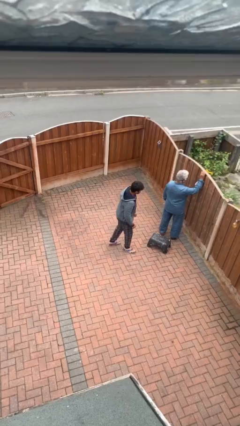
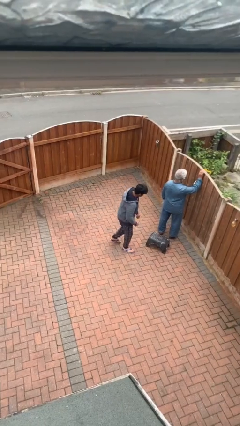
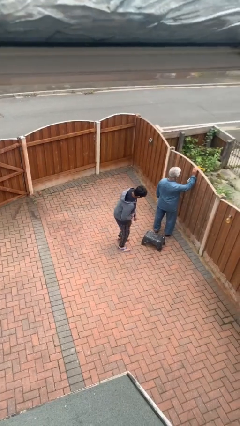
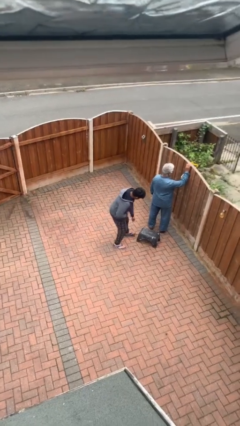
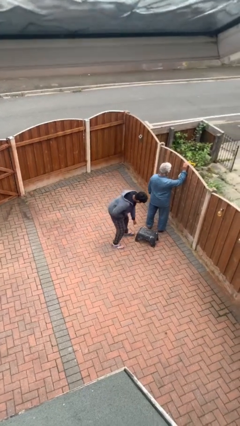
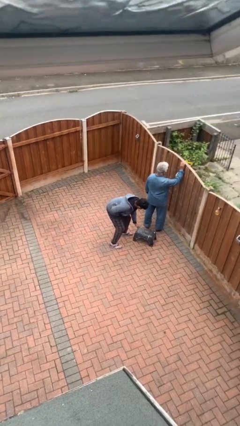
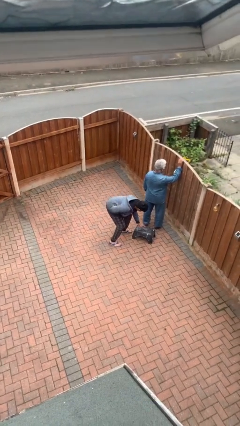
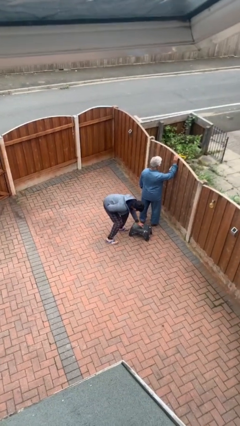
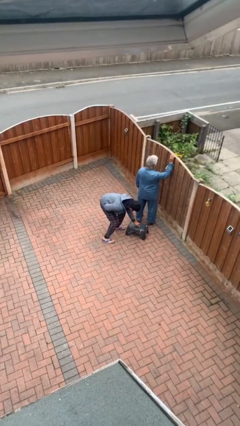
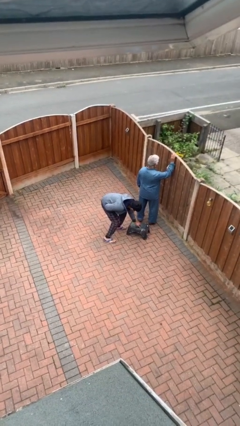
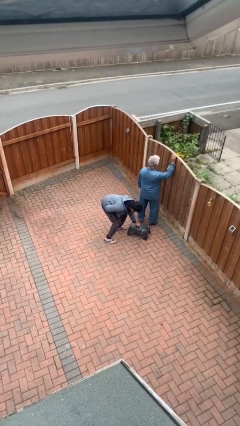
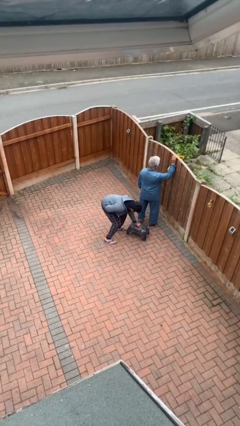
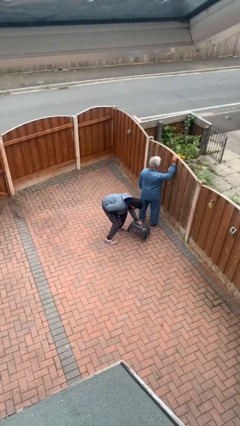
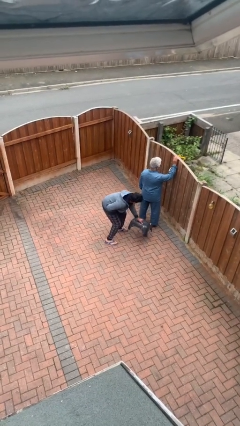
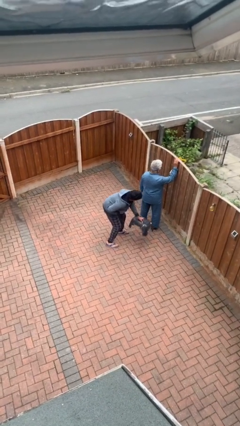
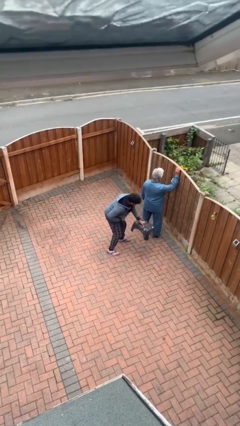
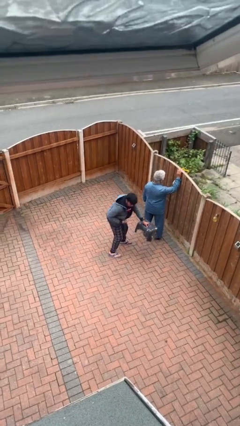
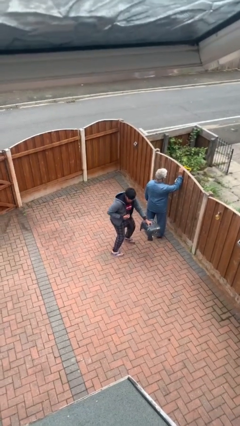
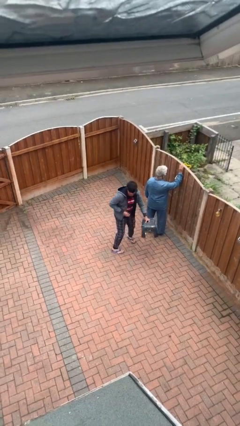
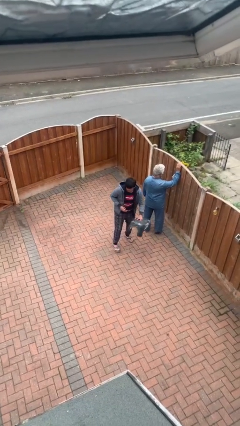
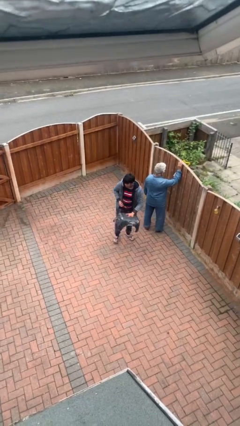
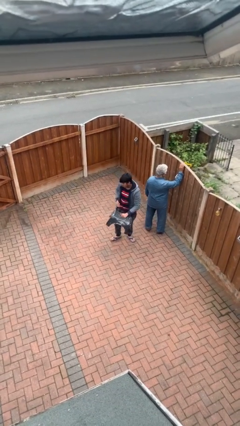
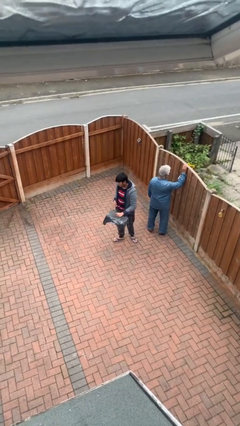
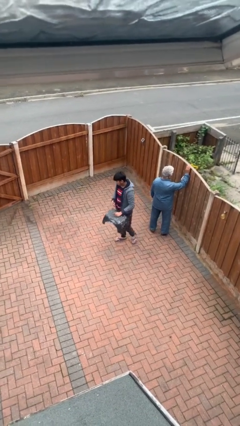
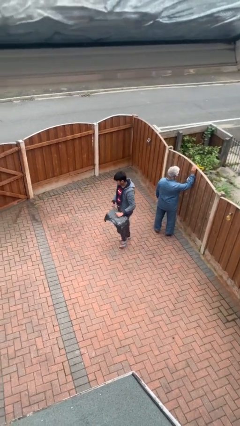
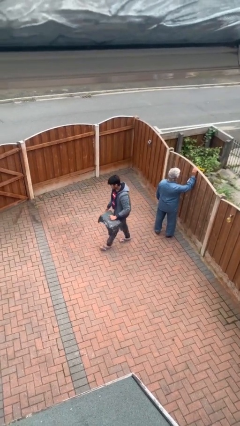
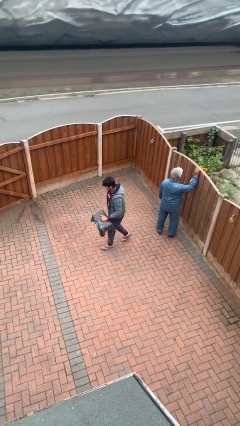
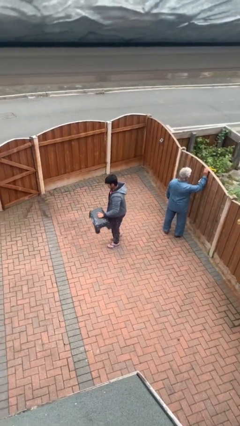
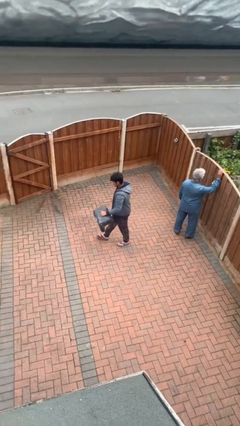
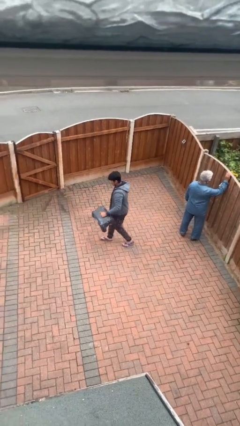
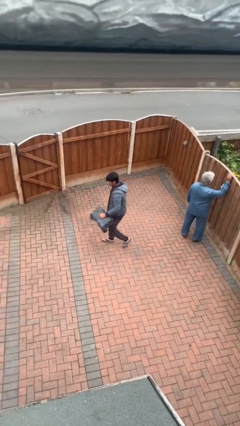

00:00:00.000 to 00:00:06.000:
person steals object from person

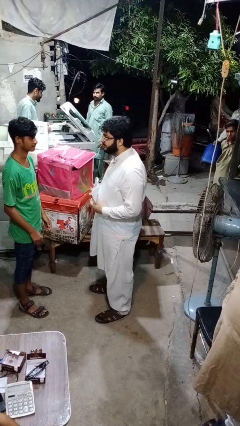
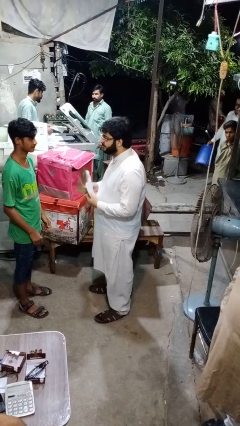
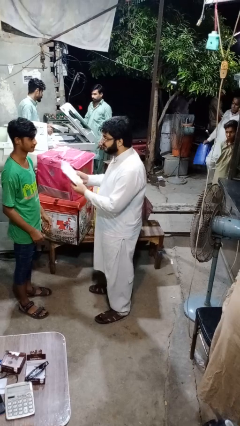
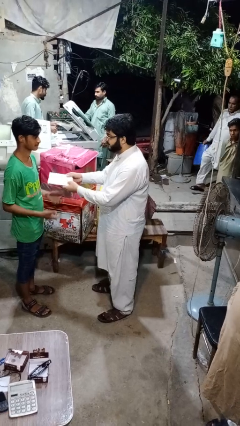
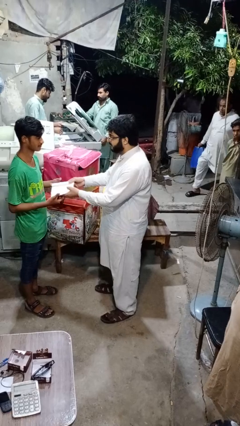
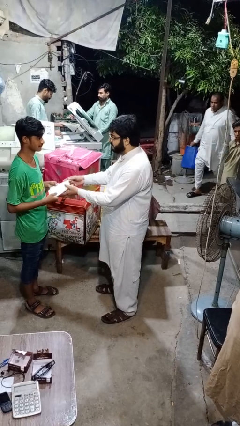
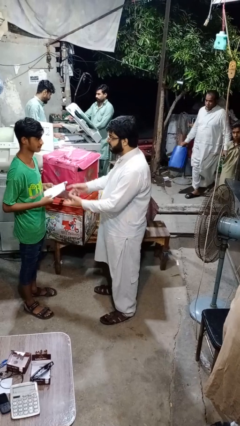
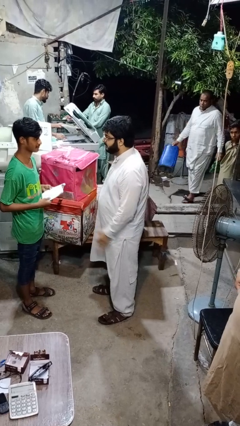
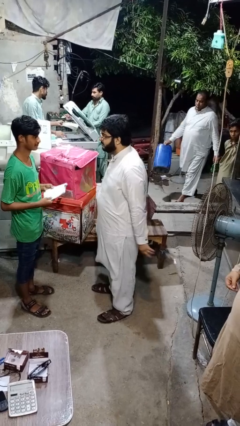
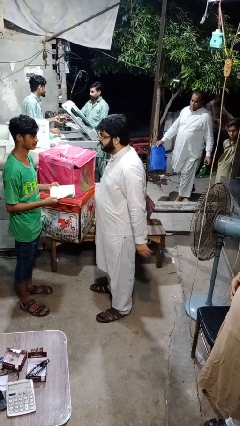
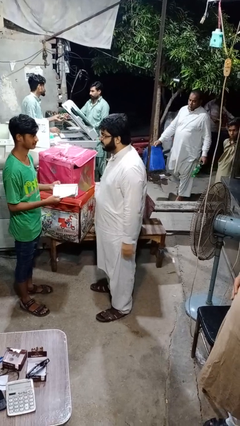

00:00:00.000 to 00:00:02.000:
person transfers object to person

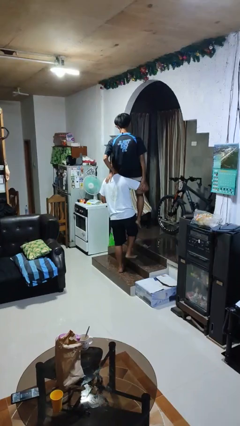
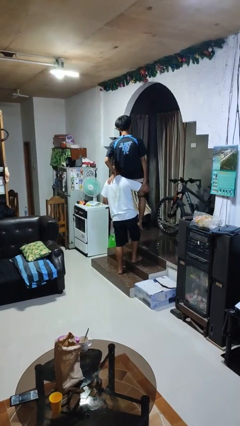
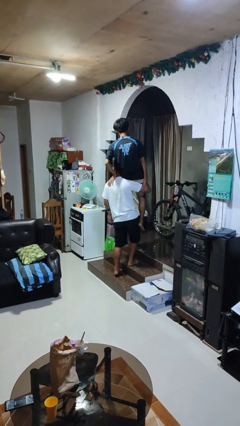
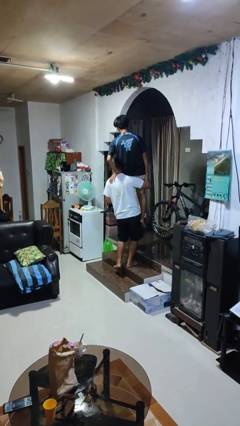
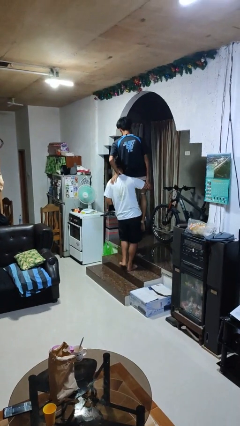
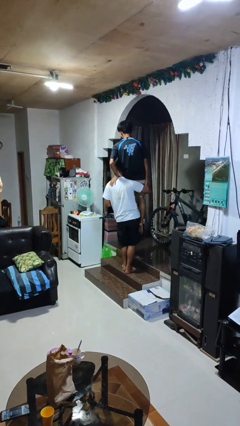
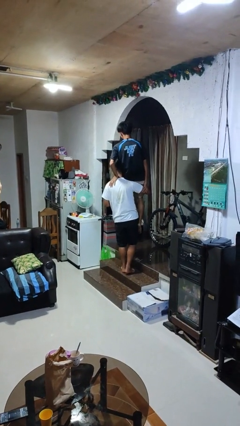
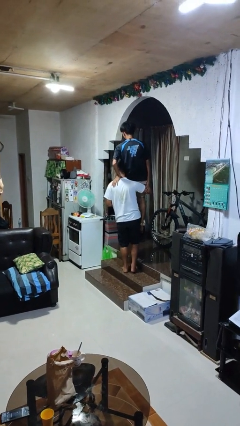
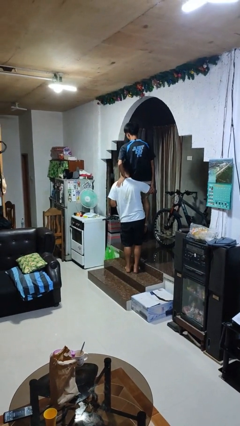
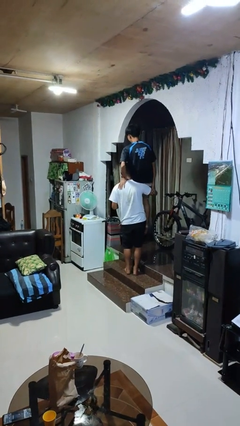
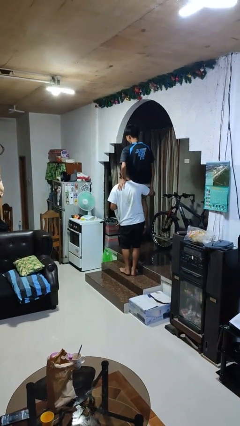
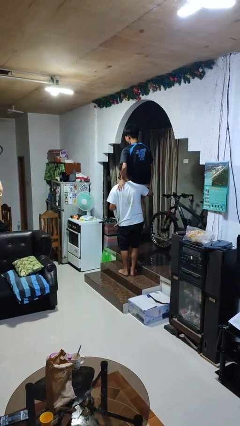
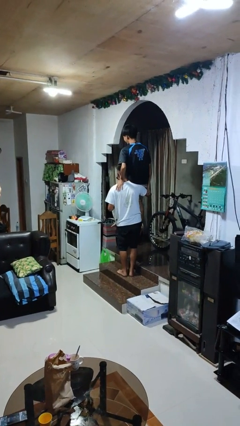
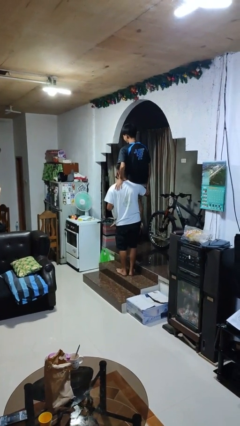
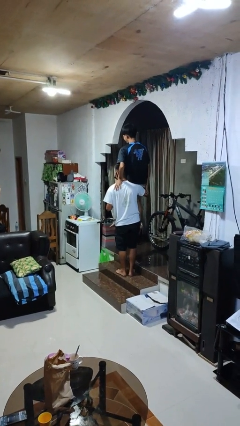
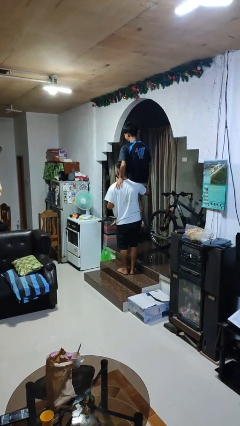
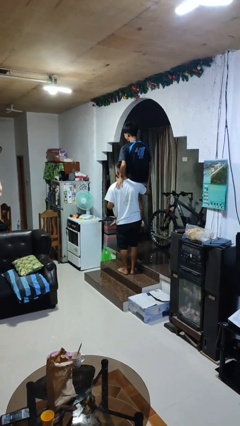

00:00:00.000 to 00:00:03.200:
person carries person on shoulders

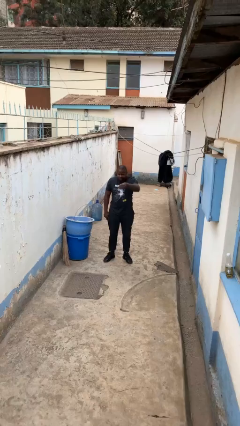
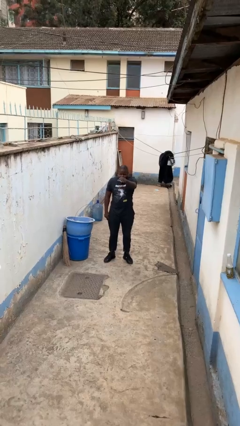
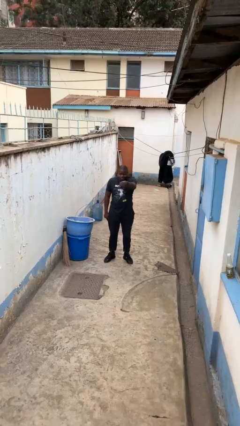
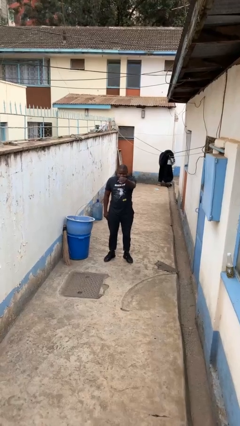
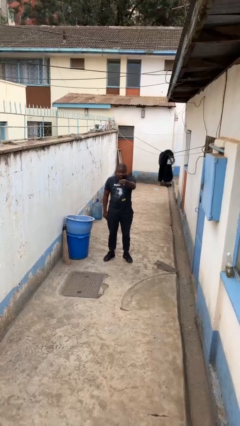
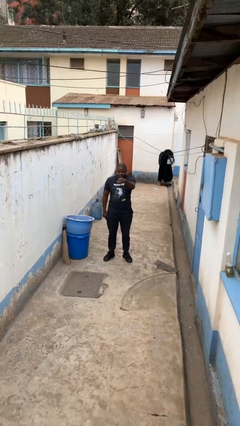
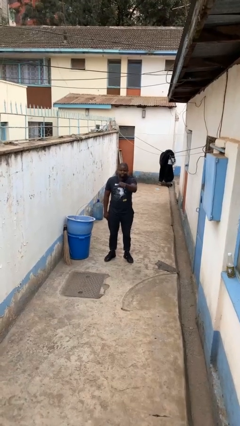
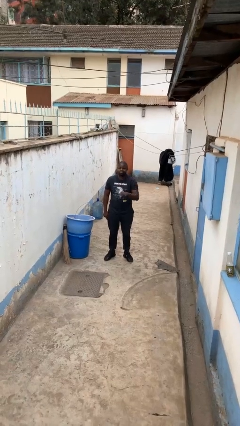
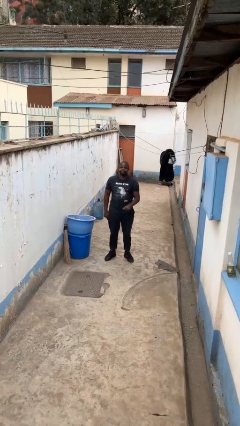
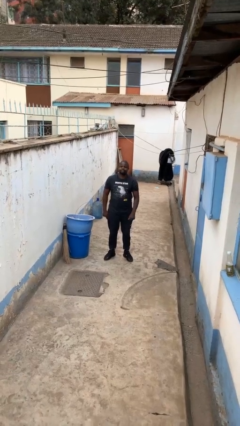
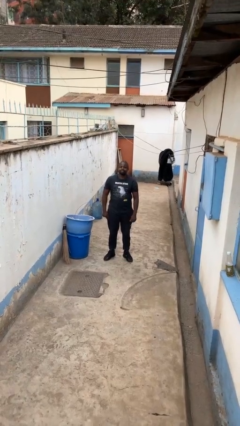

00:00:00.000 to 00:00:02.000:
person gestures come here

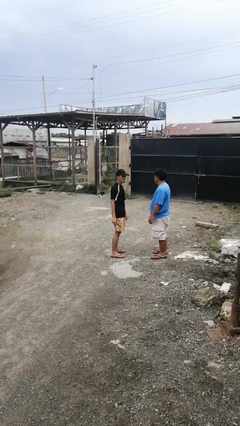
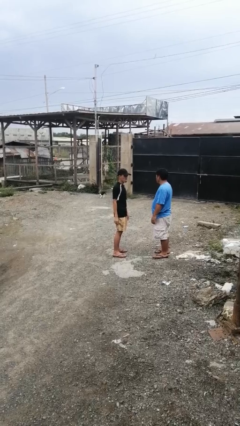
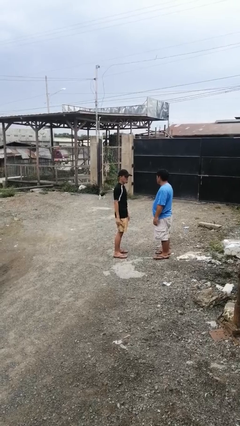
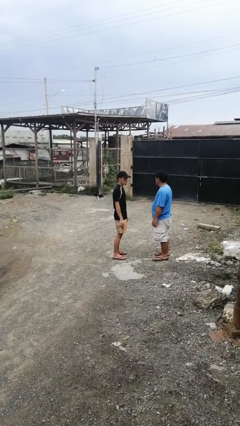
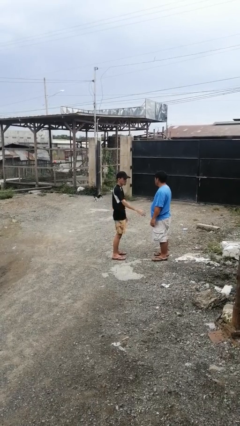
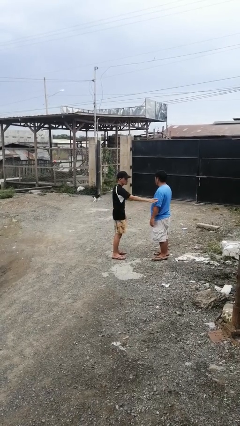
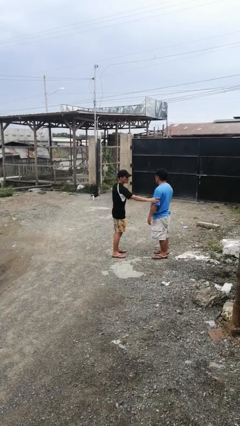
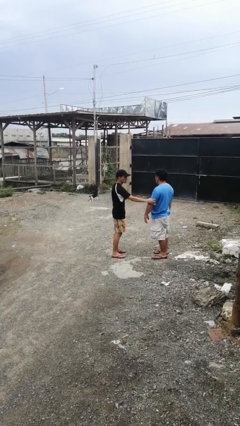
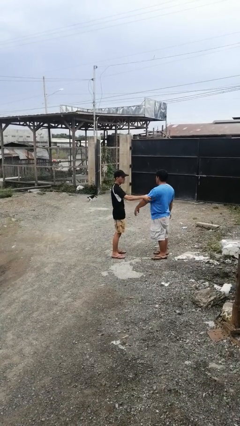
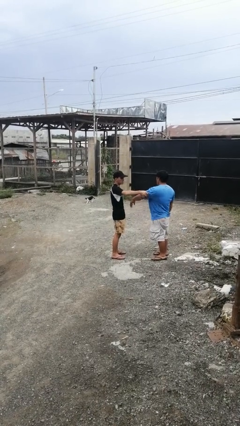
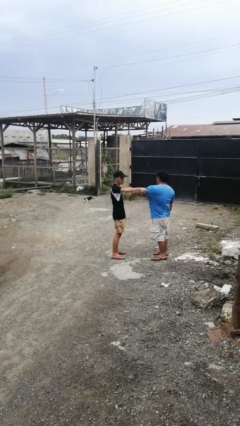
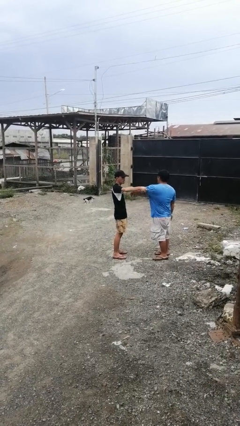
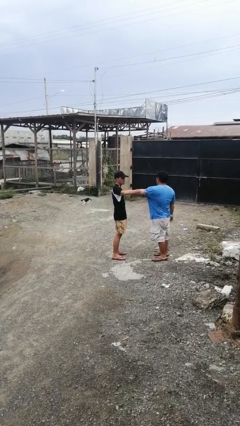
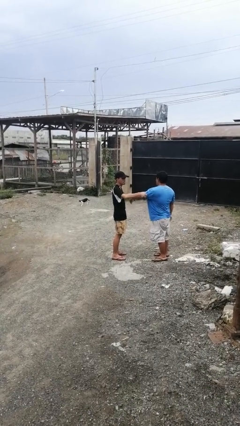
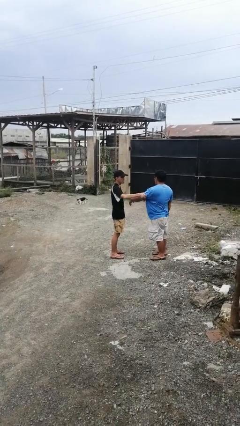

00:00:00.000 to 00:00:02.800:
person grabs person by bicep

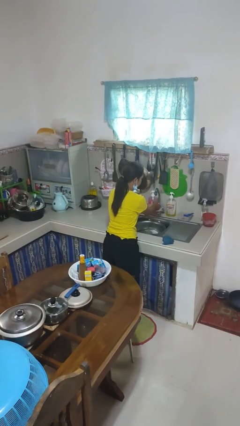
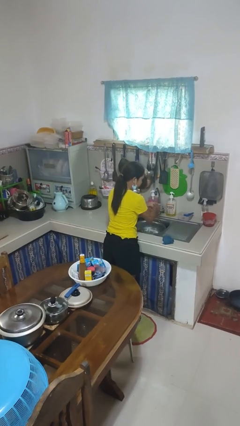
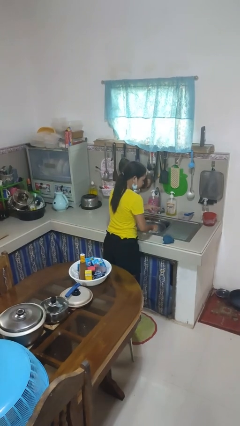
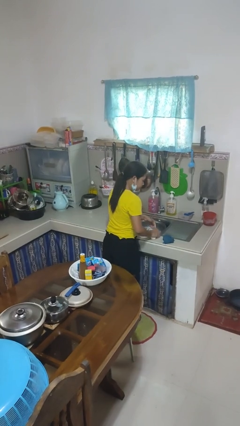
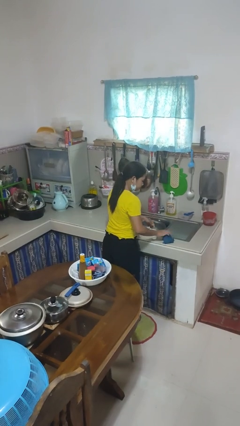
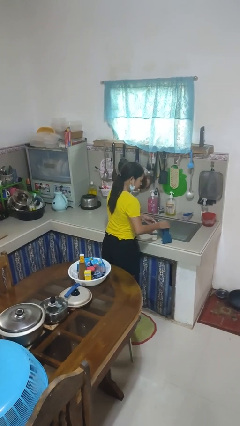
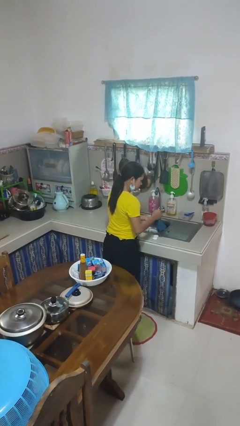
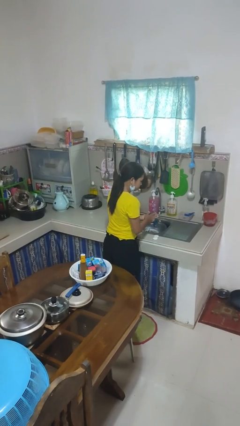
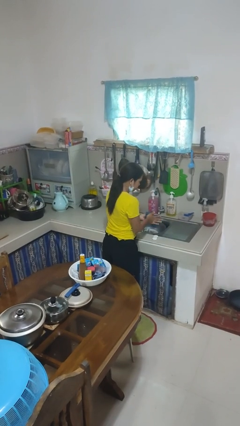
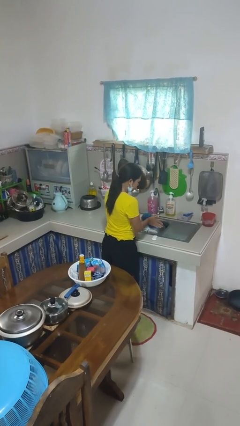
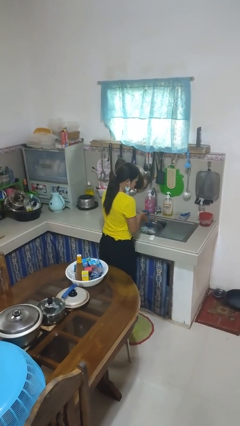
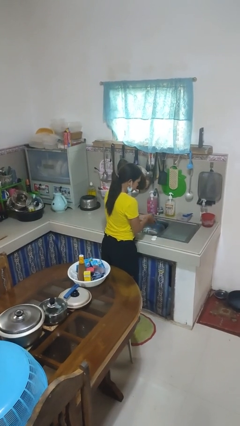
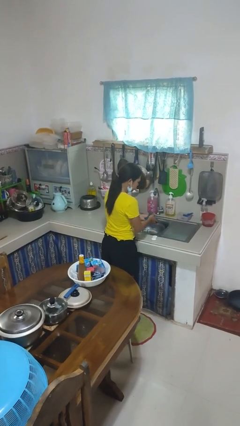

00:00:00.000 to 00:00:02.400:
person dries hands with towel
